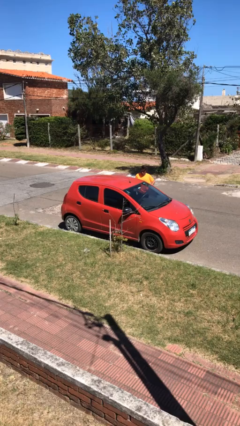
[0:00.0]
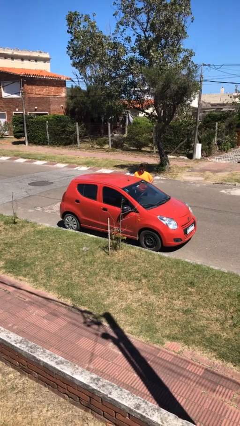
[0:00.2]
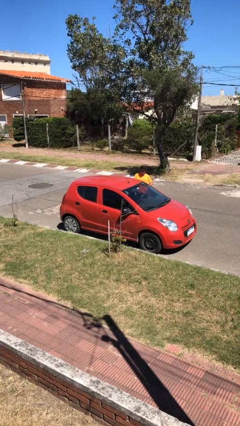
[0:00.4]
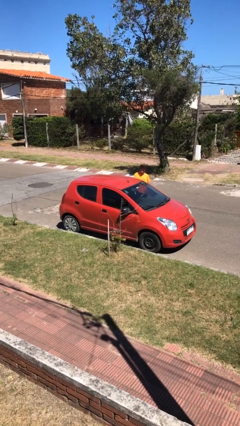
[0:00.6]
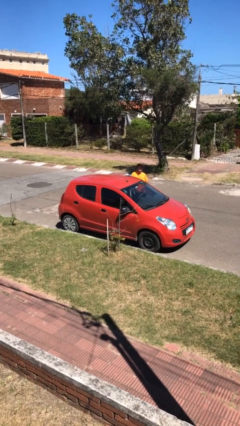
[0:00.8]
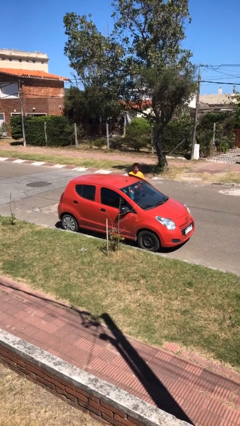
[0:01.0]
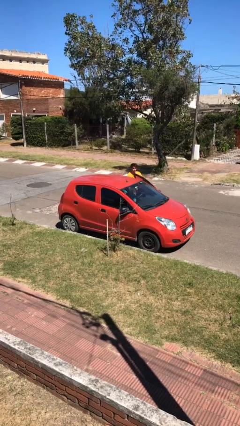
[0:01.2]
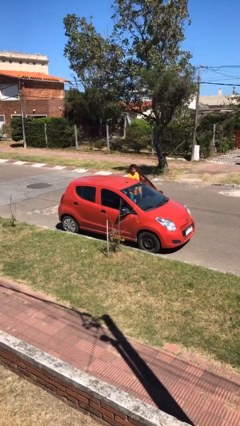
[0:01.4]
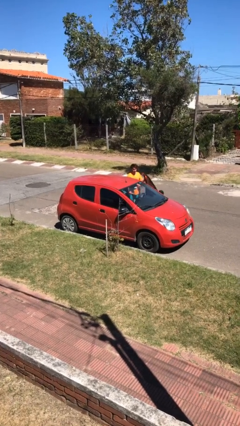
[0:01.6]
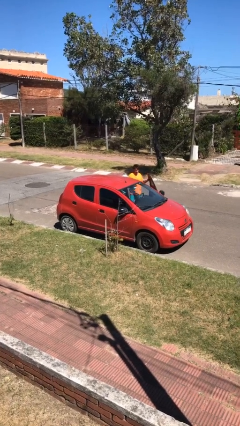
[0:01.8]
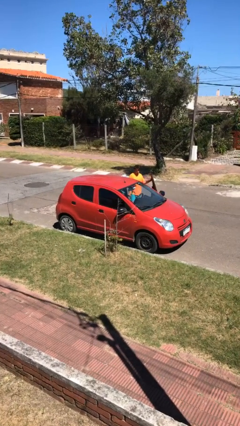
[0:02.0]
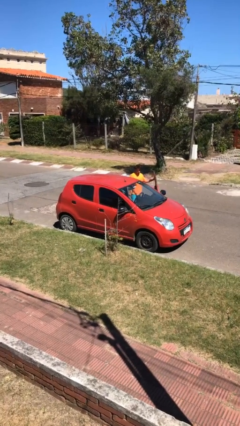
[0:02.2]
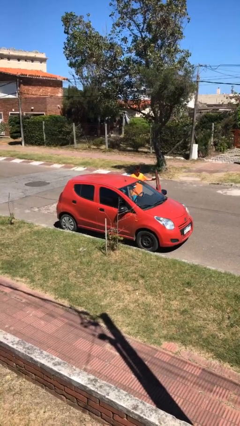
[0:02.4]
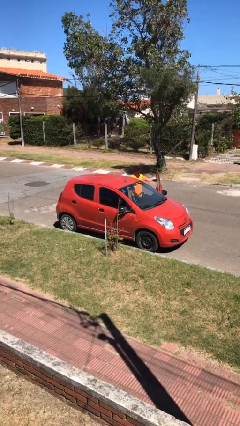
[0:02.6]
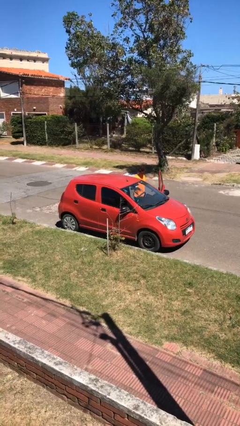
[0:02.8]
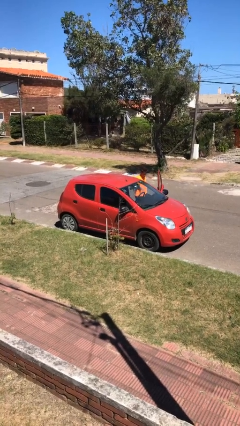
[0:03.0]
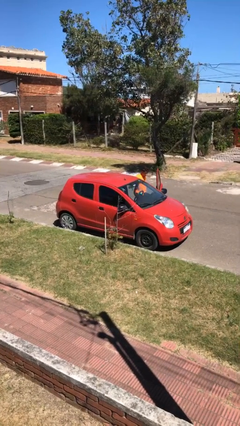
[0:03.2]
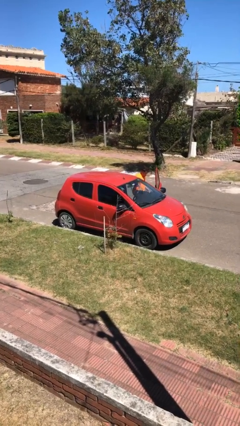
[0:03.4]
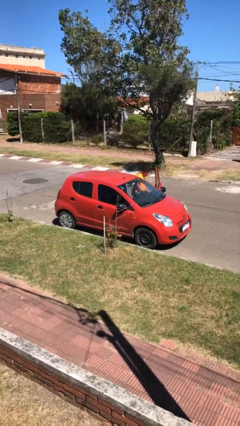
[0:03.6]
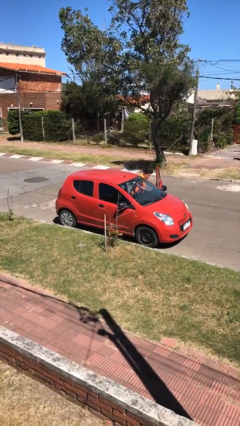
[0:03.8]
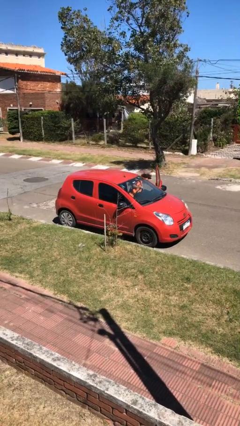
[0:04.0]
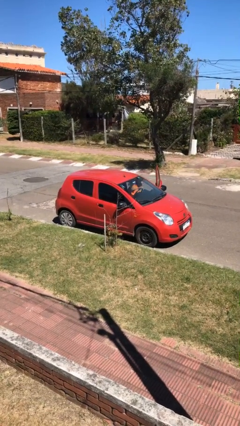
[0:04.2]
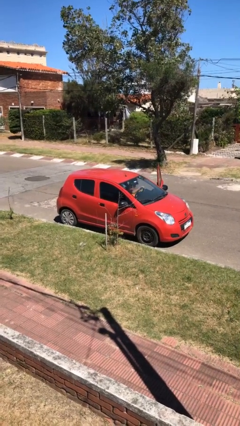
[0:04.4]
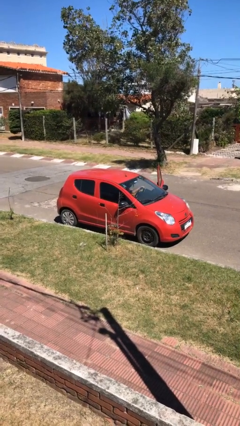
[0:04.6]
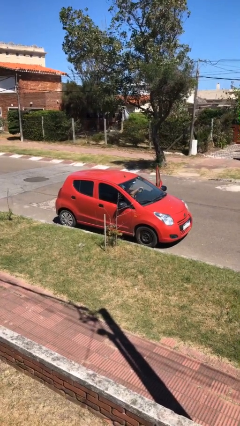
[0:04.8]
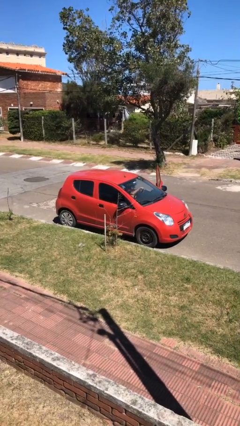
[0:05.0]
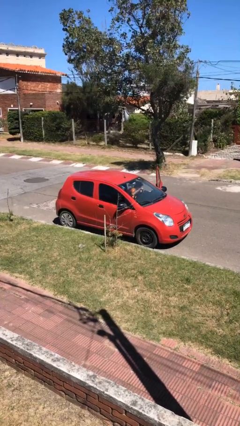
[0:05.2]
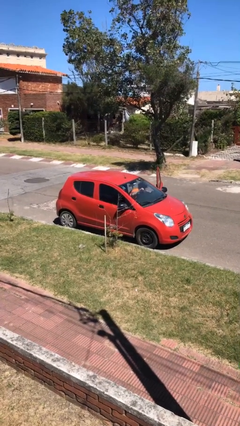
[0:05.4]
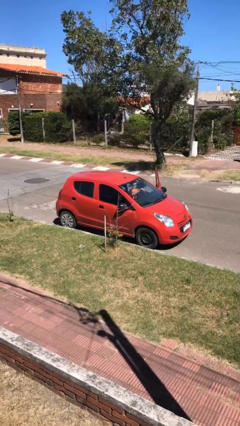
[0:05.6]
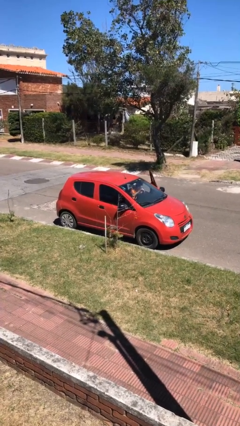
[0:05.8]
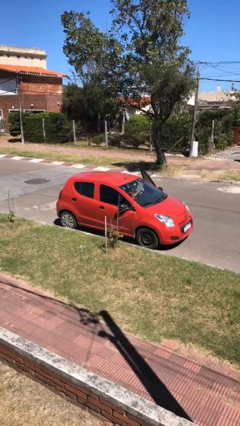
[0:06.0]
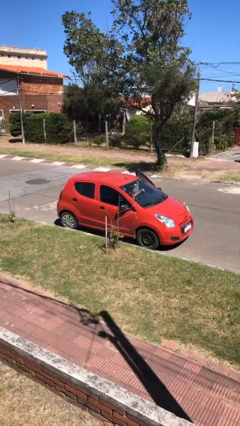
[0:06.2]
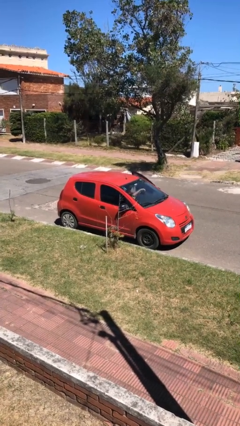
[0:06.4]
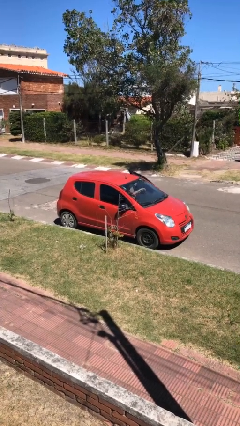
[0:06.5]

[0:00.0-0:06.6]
car picks up person

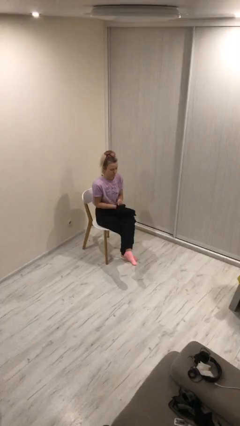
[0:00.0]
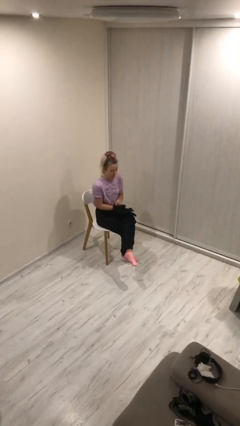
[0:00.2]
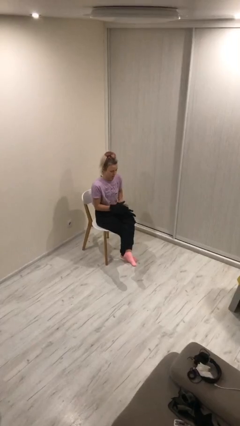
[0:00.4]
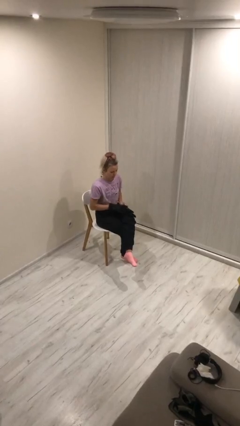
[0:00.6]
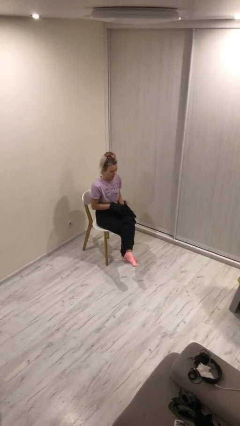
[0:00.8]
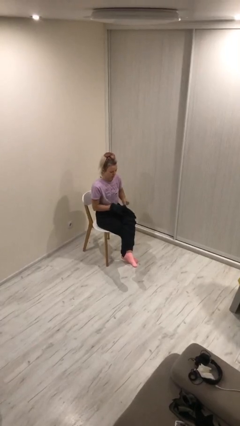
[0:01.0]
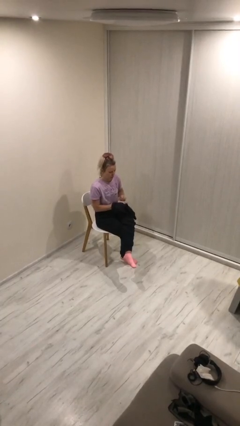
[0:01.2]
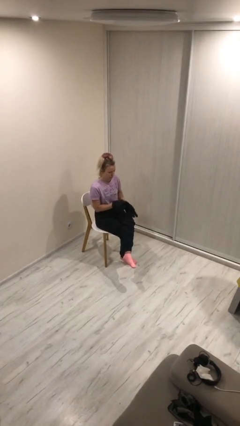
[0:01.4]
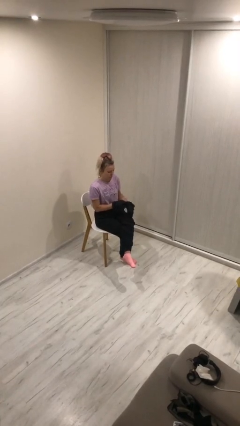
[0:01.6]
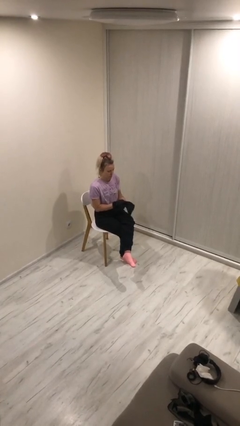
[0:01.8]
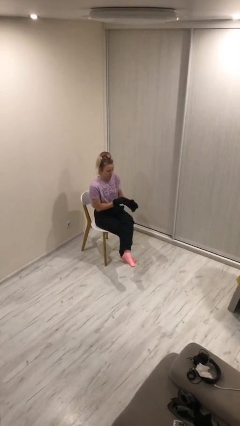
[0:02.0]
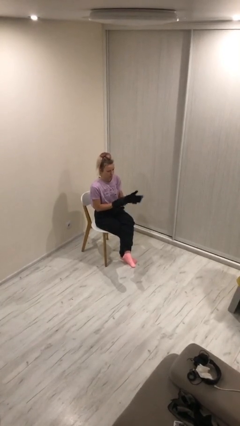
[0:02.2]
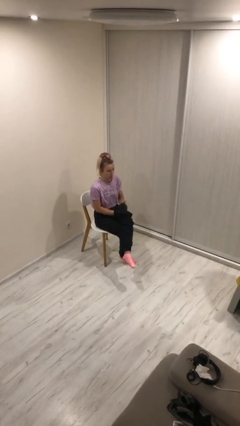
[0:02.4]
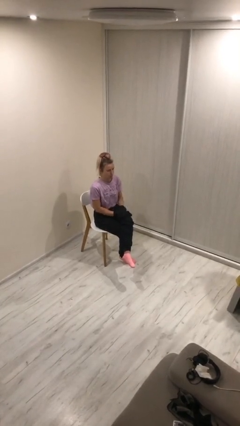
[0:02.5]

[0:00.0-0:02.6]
person puts on gloves

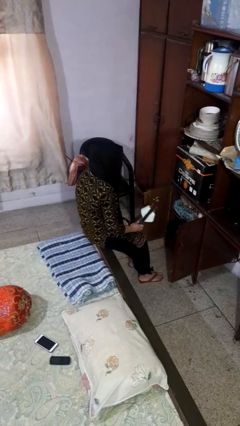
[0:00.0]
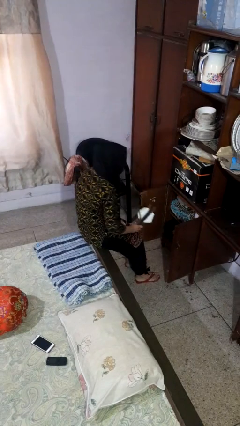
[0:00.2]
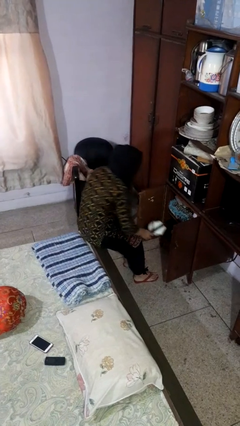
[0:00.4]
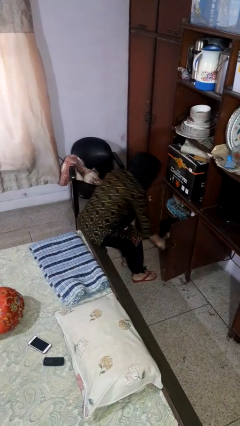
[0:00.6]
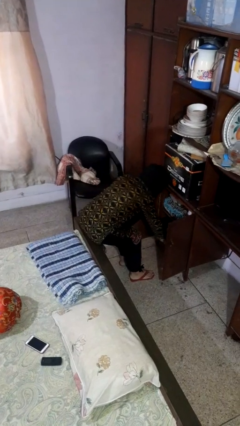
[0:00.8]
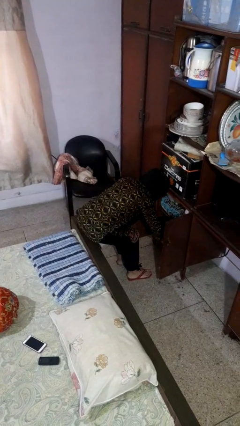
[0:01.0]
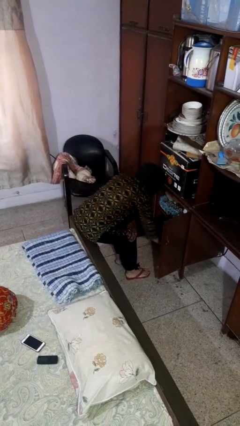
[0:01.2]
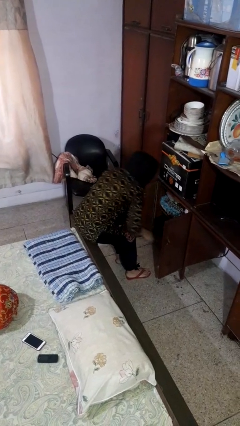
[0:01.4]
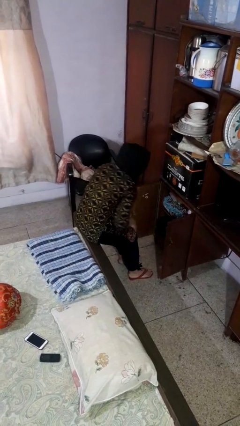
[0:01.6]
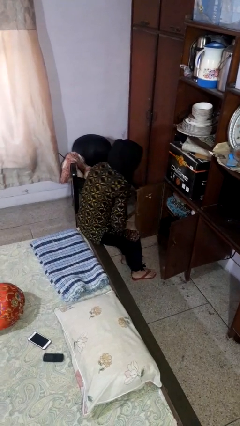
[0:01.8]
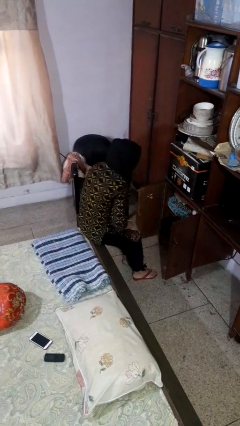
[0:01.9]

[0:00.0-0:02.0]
person puts object in cabinet

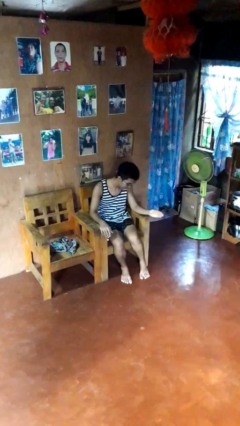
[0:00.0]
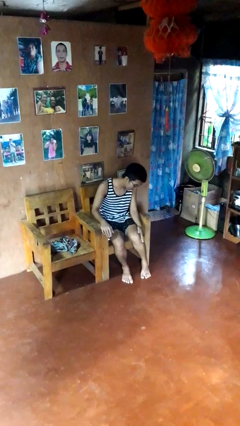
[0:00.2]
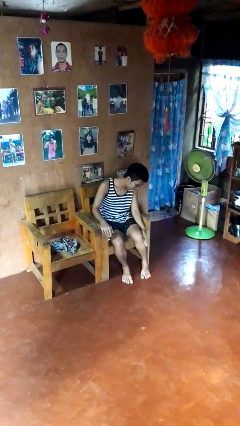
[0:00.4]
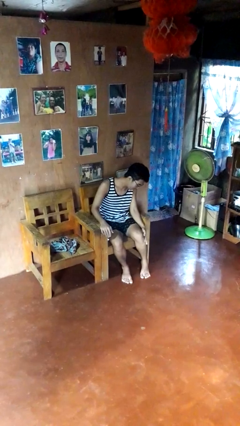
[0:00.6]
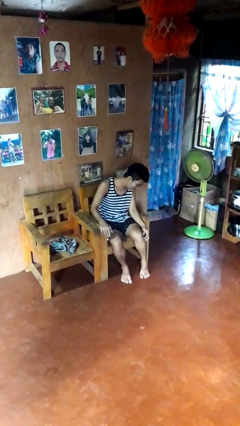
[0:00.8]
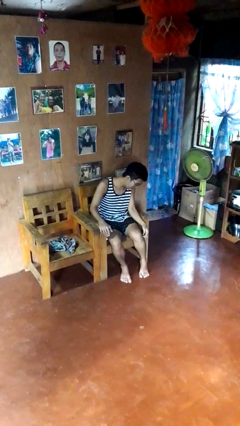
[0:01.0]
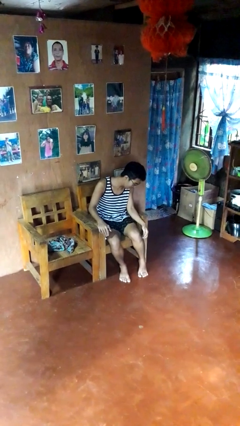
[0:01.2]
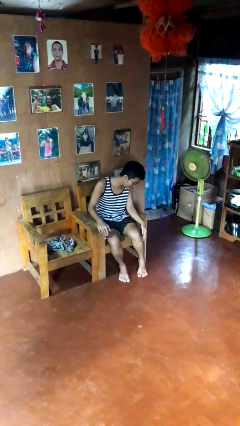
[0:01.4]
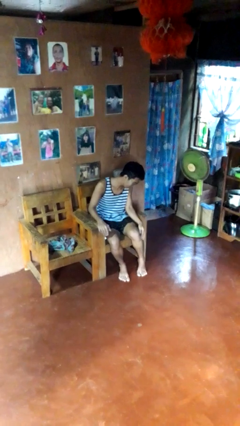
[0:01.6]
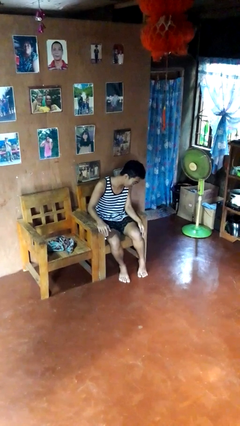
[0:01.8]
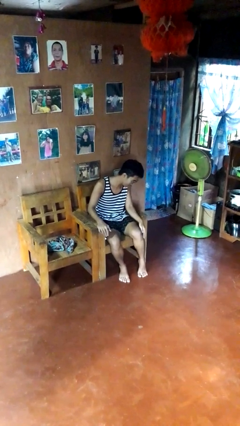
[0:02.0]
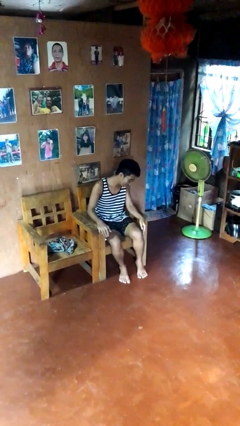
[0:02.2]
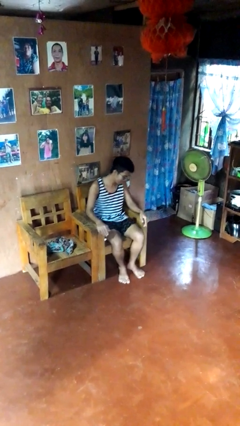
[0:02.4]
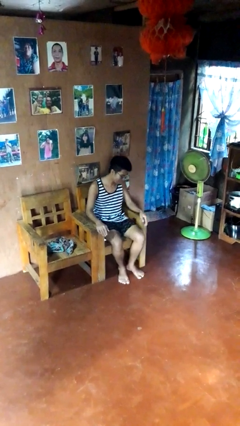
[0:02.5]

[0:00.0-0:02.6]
person swats bug

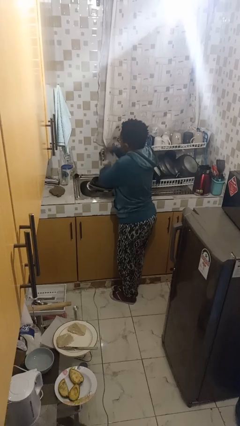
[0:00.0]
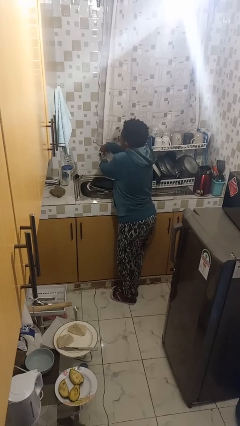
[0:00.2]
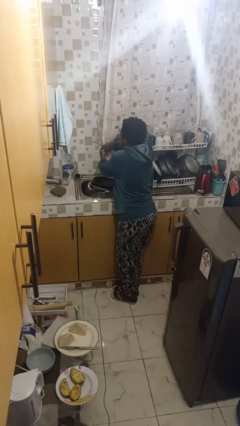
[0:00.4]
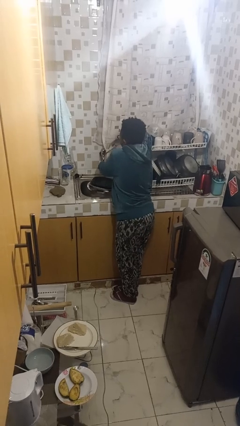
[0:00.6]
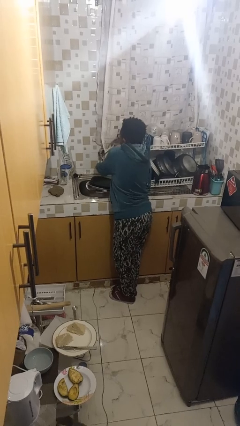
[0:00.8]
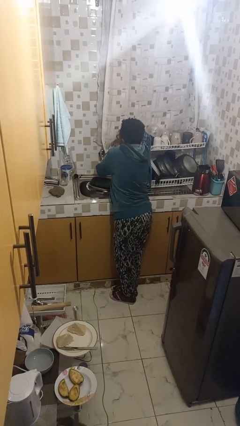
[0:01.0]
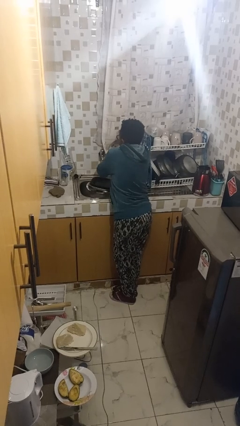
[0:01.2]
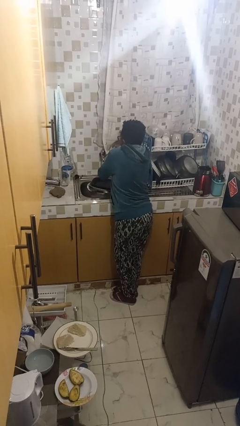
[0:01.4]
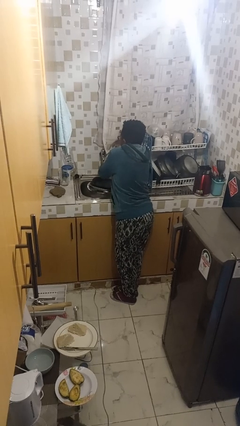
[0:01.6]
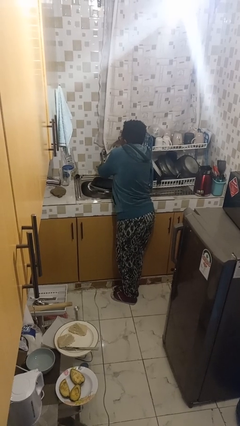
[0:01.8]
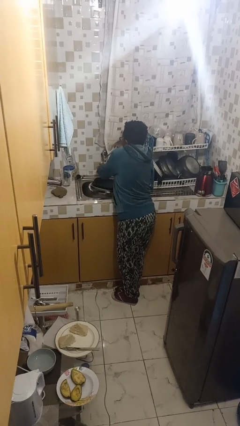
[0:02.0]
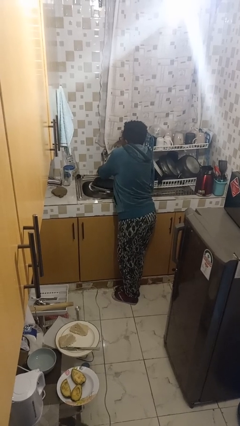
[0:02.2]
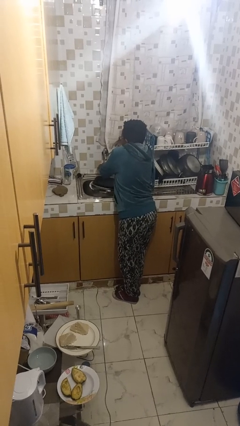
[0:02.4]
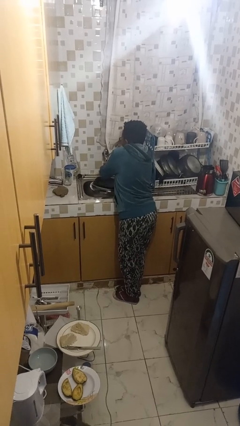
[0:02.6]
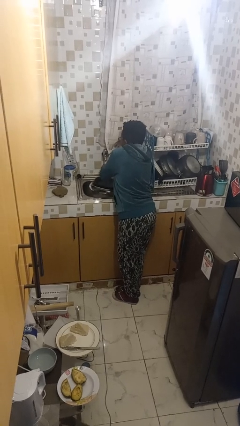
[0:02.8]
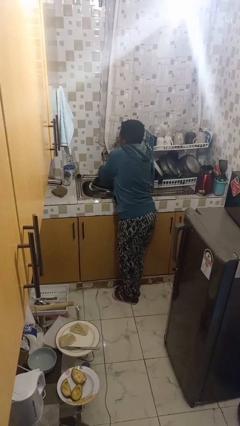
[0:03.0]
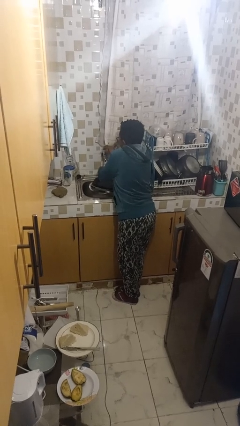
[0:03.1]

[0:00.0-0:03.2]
person washes hands

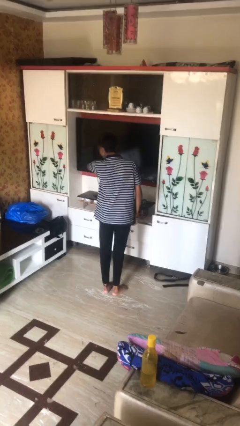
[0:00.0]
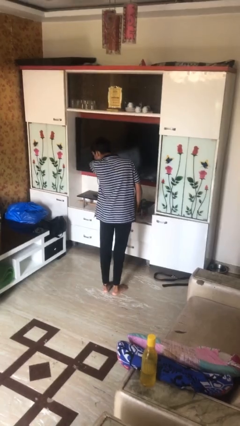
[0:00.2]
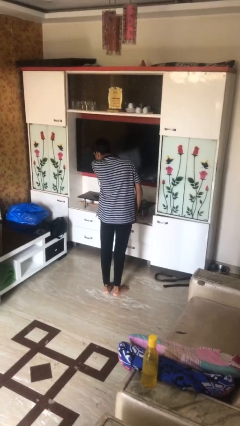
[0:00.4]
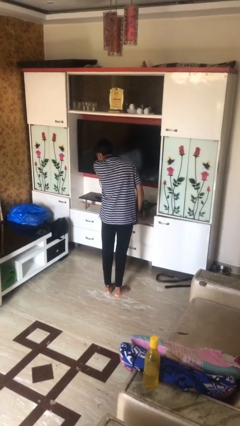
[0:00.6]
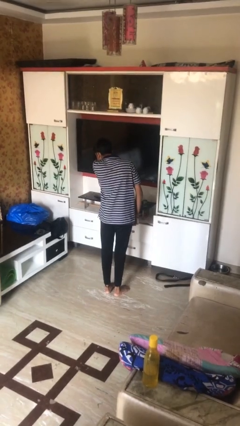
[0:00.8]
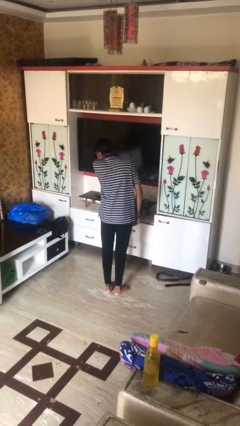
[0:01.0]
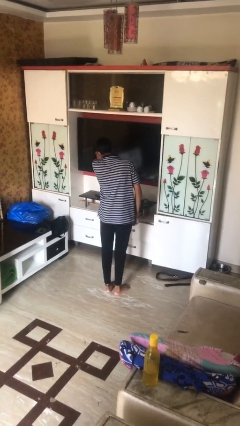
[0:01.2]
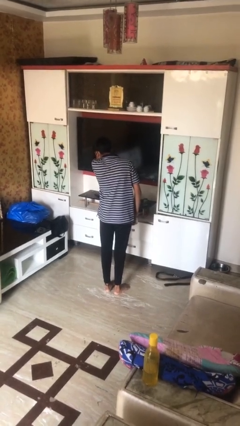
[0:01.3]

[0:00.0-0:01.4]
person sneezes into arm
